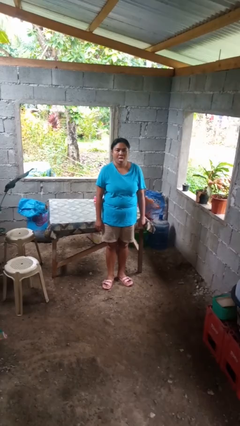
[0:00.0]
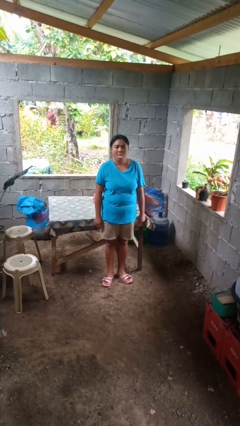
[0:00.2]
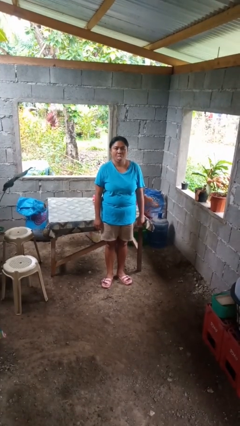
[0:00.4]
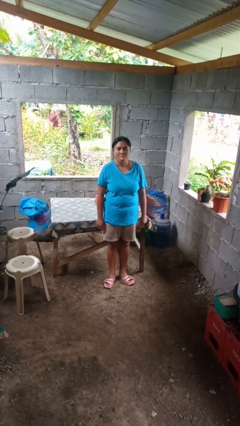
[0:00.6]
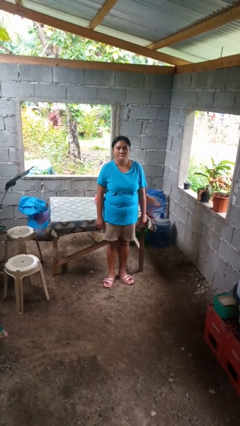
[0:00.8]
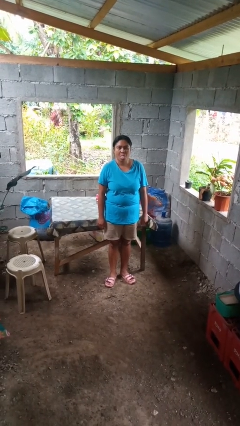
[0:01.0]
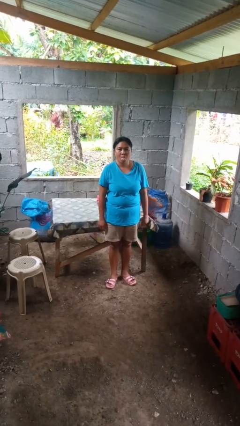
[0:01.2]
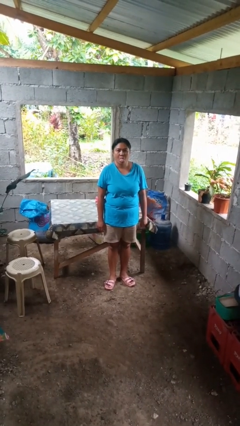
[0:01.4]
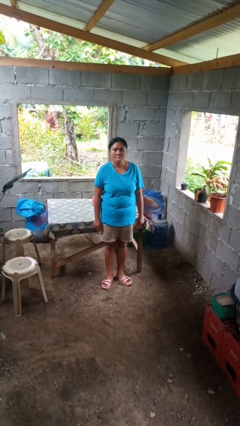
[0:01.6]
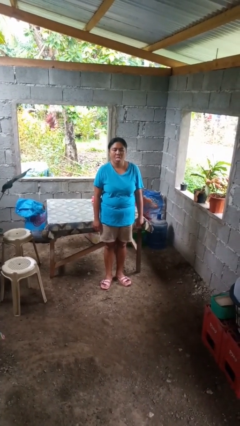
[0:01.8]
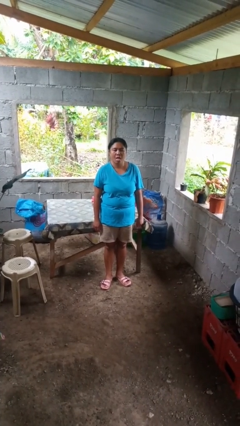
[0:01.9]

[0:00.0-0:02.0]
person sticks out tongue

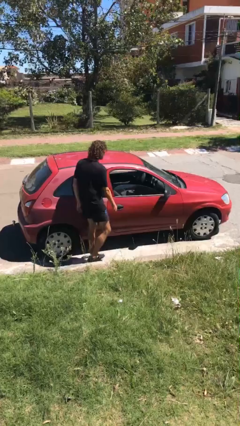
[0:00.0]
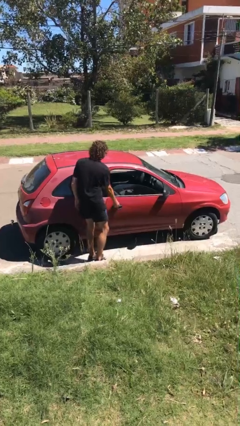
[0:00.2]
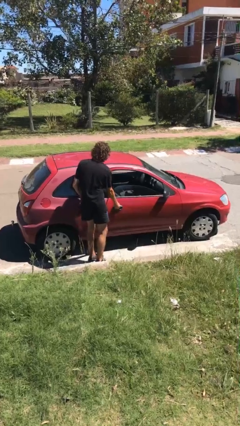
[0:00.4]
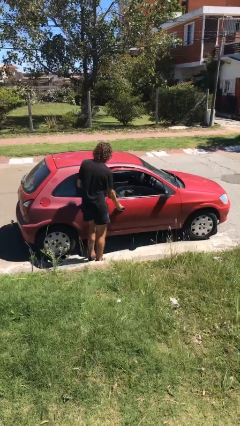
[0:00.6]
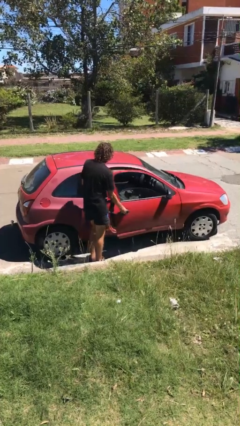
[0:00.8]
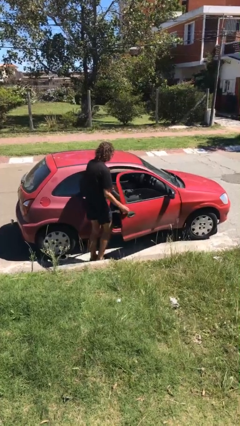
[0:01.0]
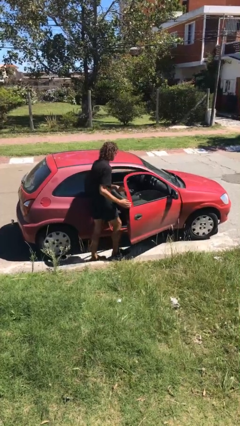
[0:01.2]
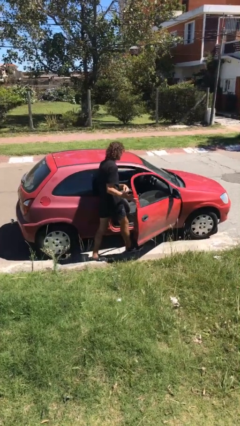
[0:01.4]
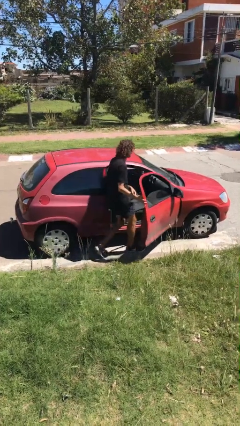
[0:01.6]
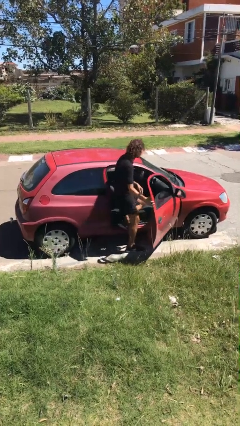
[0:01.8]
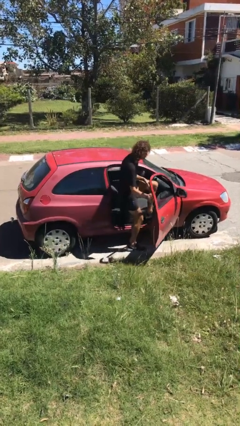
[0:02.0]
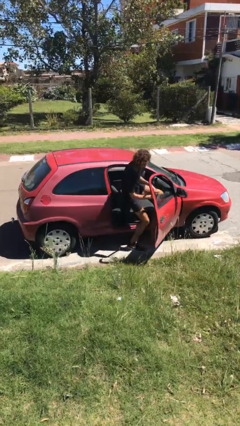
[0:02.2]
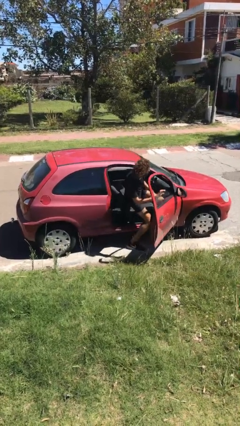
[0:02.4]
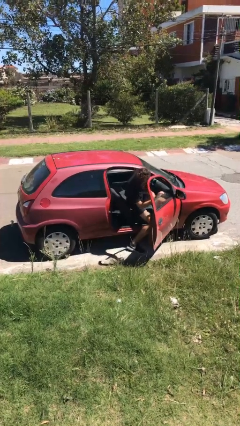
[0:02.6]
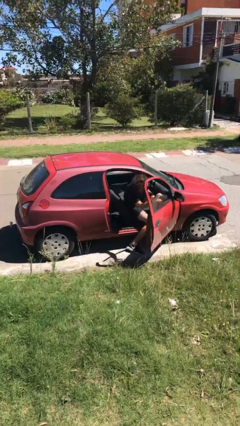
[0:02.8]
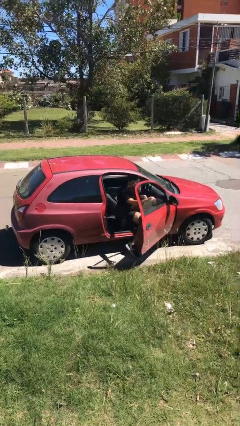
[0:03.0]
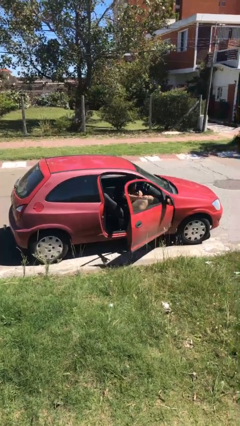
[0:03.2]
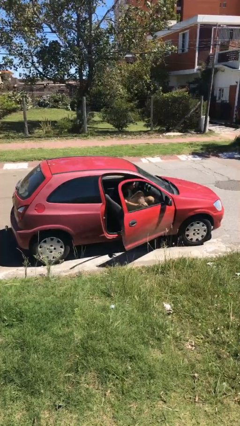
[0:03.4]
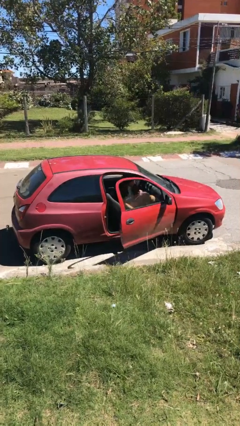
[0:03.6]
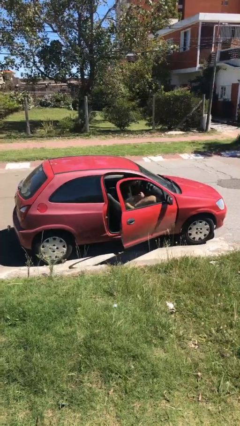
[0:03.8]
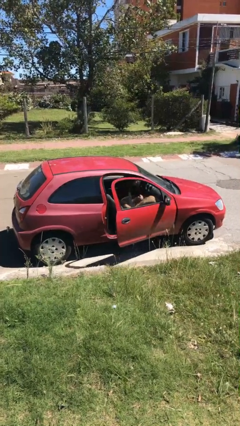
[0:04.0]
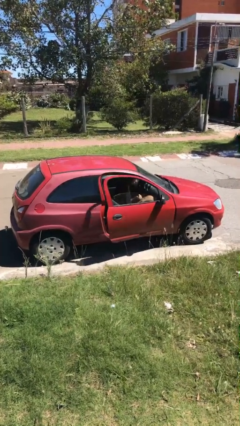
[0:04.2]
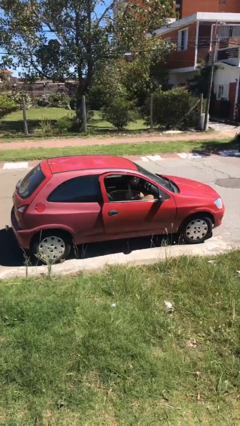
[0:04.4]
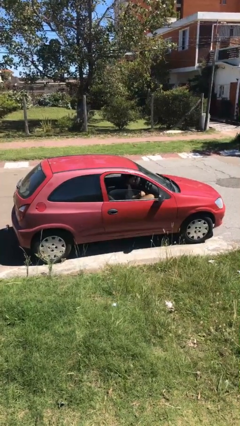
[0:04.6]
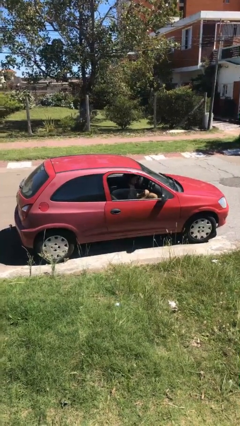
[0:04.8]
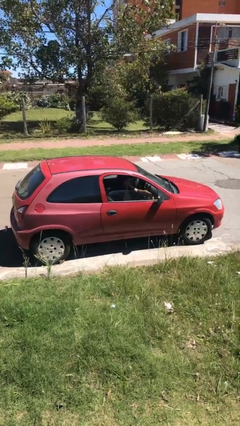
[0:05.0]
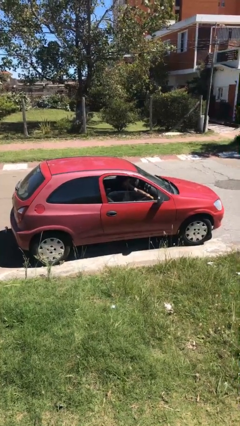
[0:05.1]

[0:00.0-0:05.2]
car picks up person

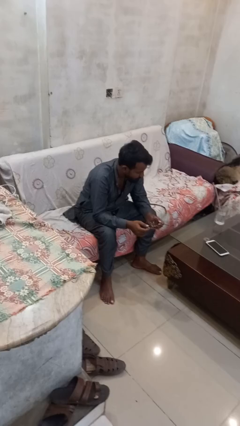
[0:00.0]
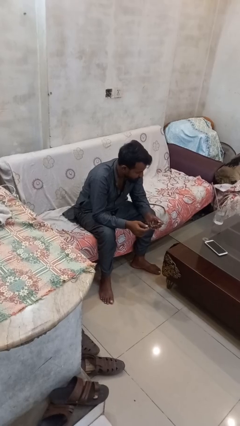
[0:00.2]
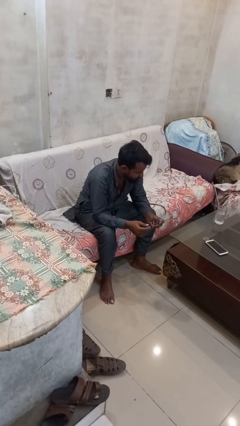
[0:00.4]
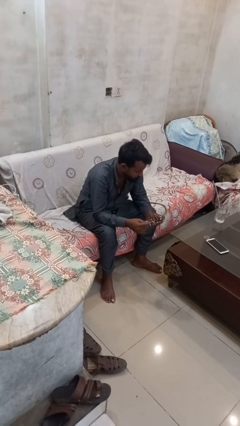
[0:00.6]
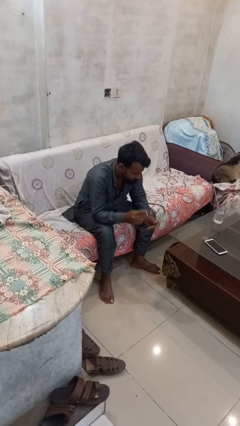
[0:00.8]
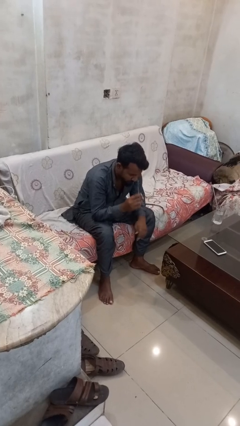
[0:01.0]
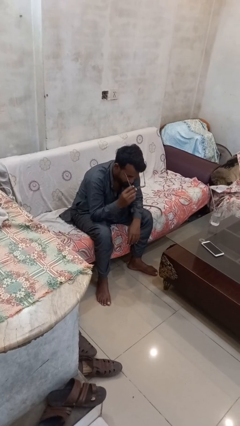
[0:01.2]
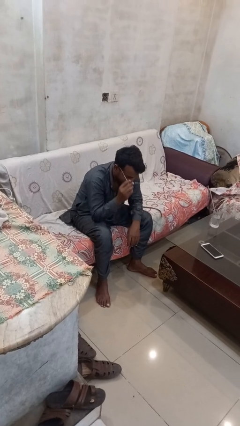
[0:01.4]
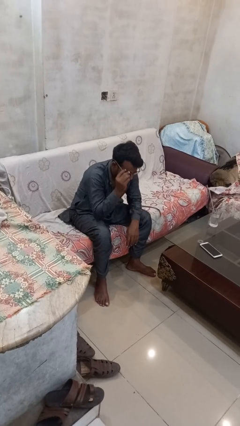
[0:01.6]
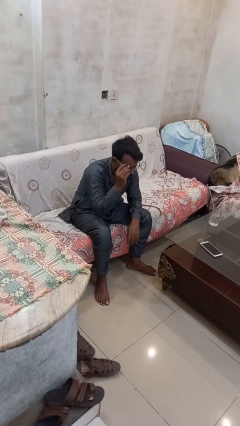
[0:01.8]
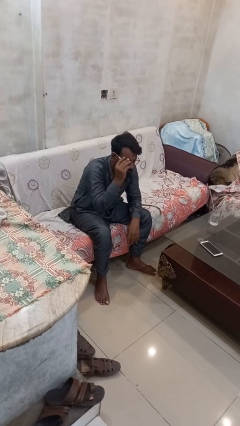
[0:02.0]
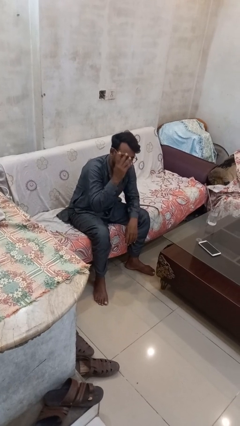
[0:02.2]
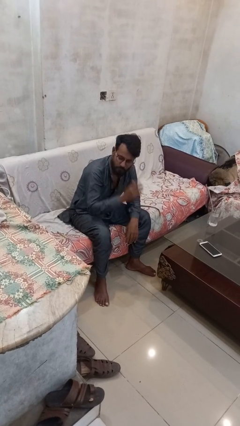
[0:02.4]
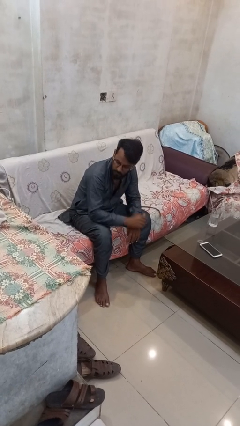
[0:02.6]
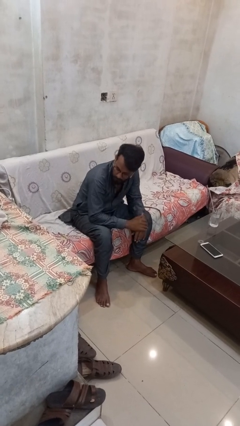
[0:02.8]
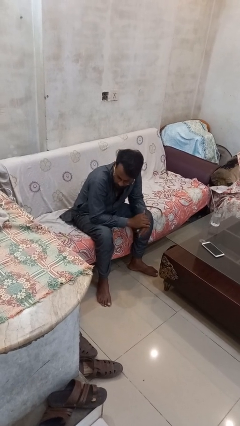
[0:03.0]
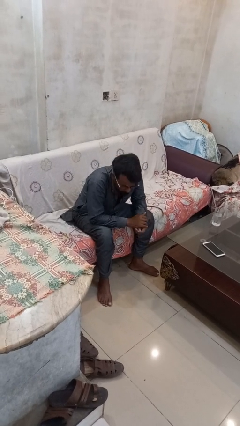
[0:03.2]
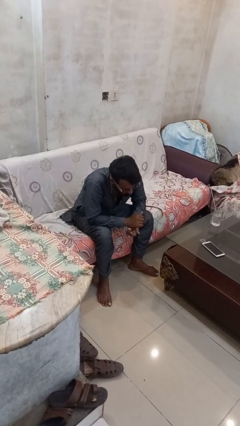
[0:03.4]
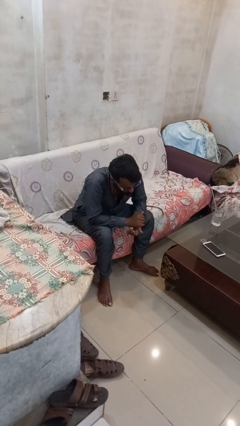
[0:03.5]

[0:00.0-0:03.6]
person puts on glasses

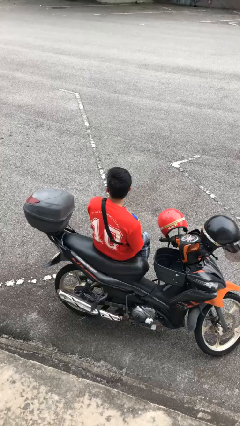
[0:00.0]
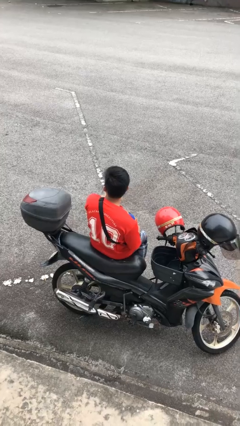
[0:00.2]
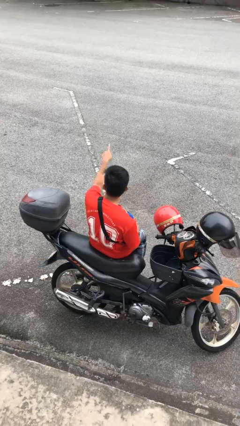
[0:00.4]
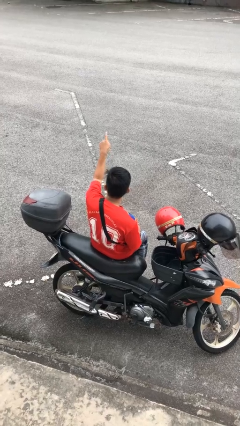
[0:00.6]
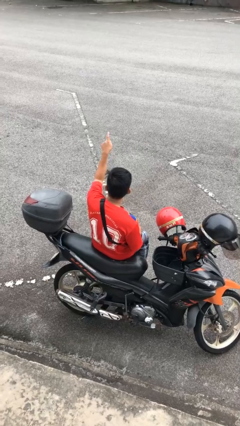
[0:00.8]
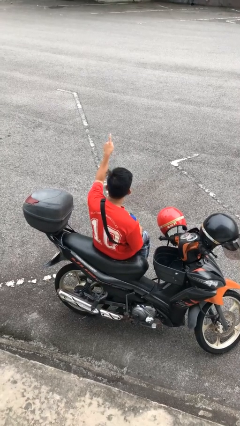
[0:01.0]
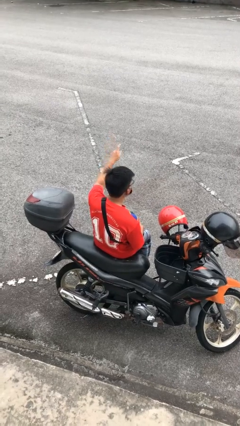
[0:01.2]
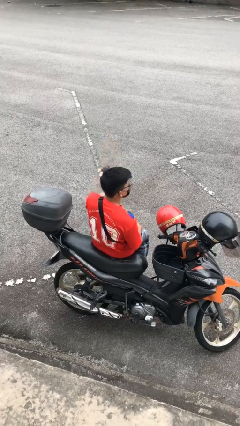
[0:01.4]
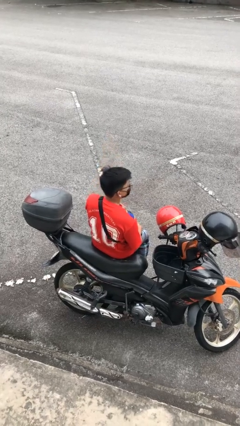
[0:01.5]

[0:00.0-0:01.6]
person points at person

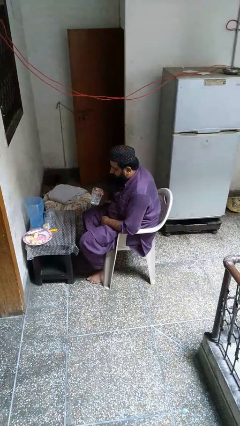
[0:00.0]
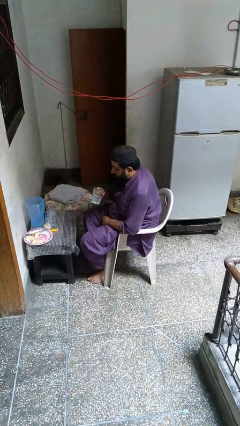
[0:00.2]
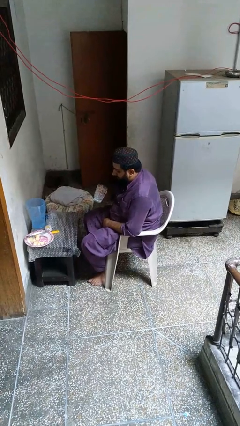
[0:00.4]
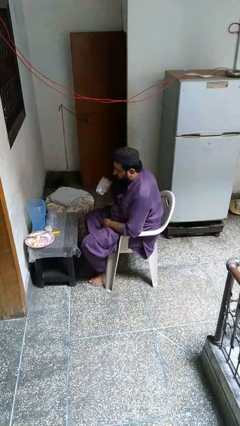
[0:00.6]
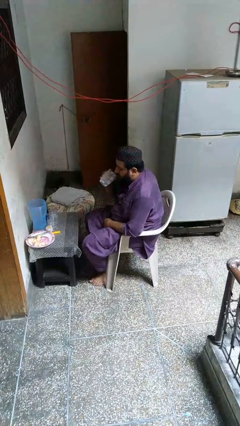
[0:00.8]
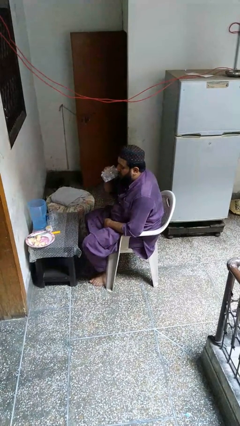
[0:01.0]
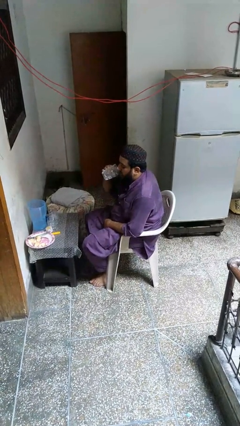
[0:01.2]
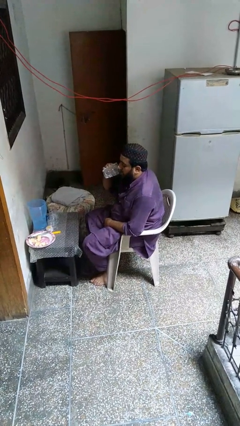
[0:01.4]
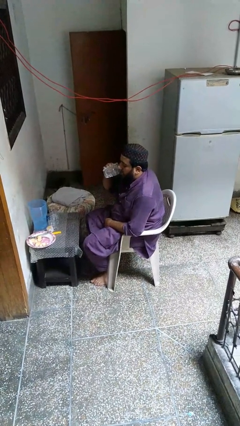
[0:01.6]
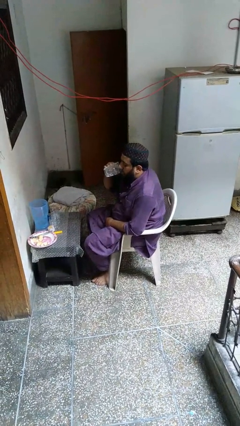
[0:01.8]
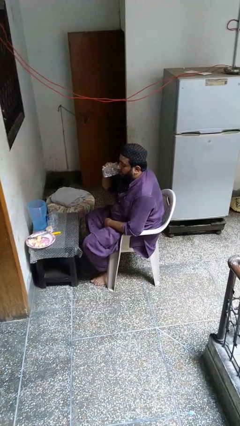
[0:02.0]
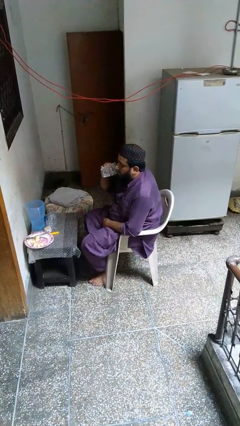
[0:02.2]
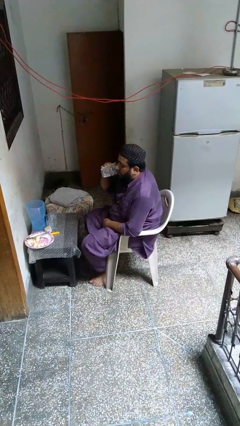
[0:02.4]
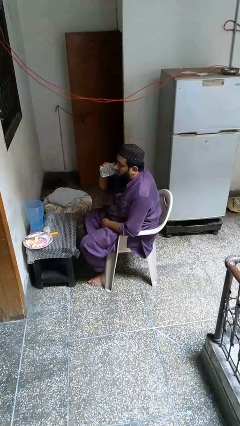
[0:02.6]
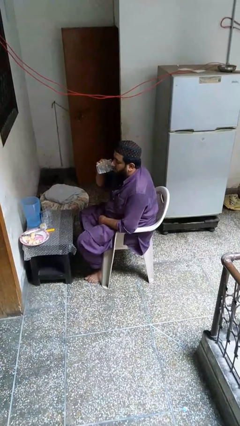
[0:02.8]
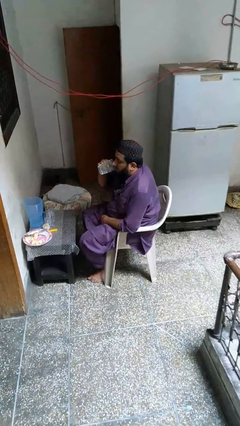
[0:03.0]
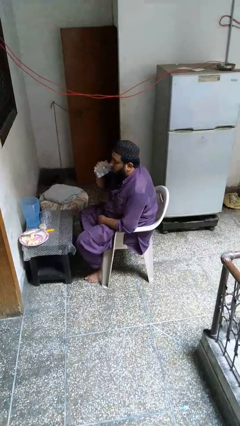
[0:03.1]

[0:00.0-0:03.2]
person drinks from mug

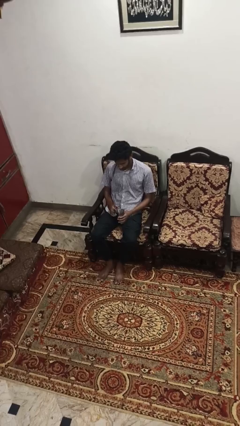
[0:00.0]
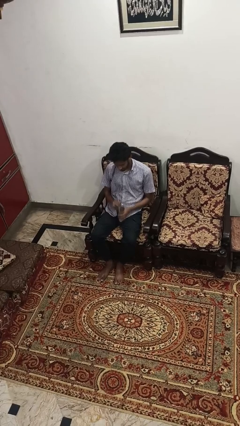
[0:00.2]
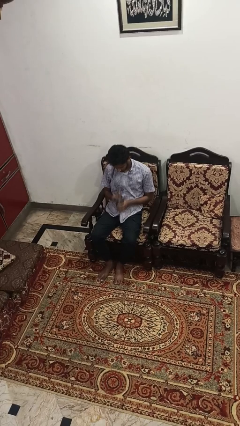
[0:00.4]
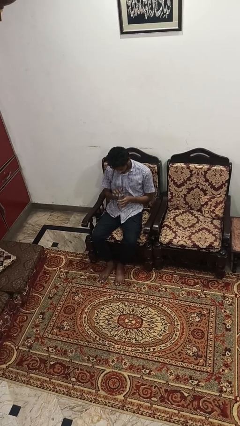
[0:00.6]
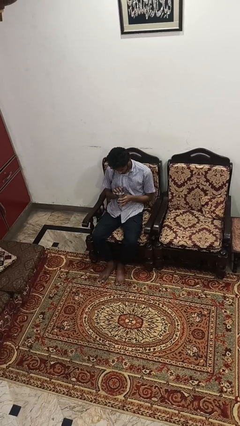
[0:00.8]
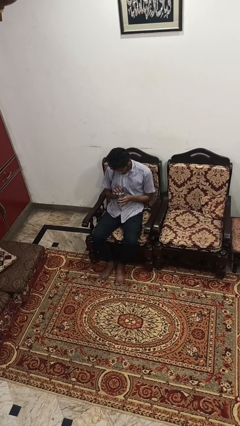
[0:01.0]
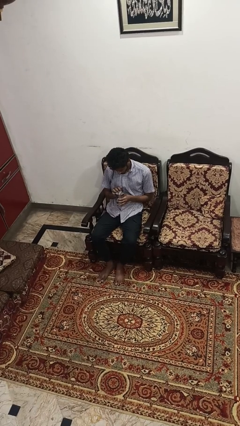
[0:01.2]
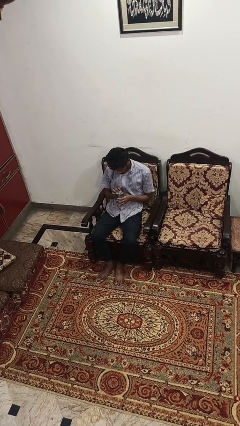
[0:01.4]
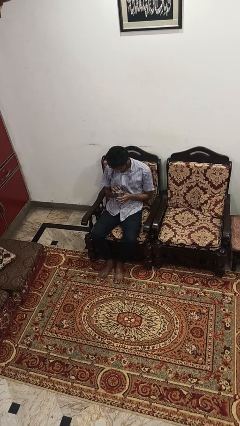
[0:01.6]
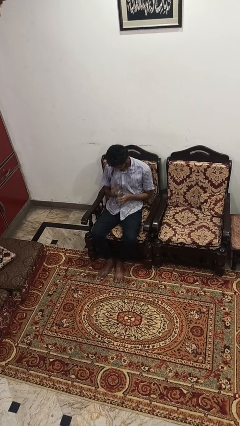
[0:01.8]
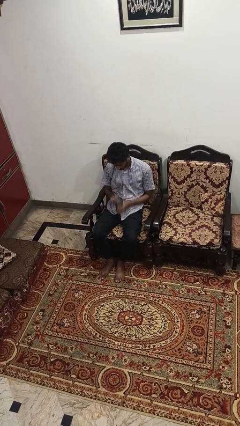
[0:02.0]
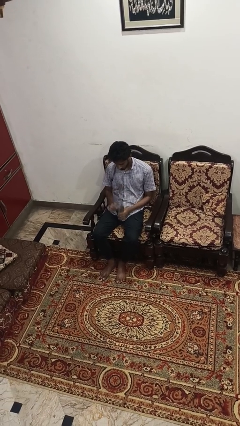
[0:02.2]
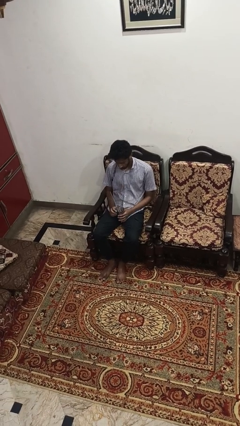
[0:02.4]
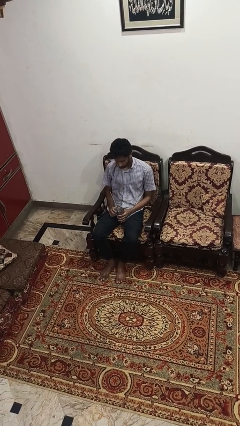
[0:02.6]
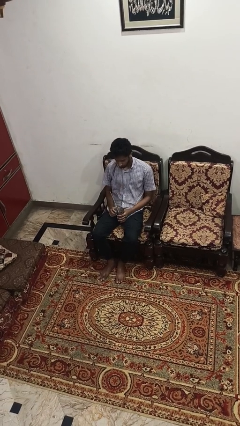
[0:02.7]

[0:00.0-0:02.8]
person drinks from straw
